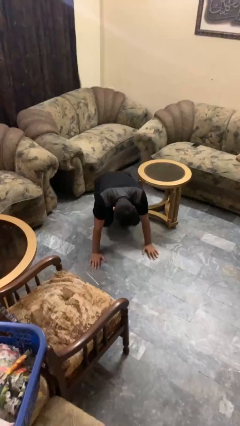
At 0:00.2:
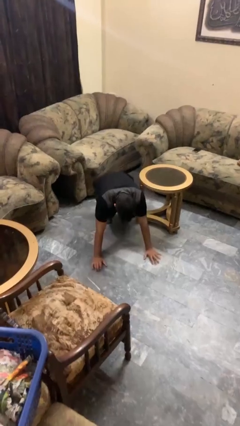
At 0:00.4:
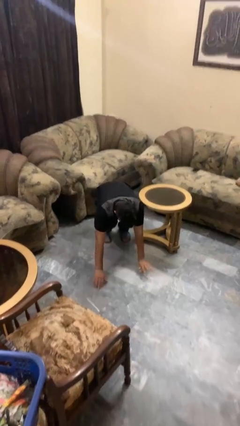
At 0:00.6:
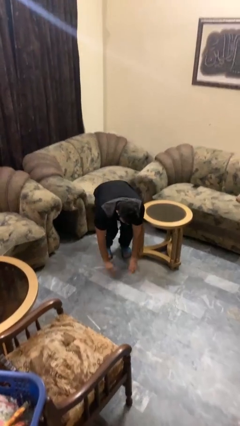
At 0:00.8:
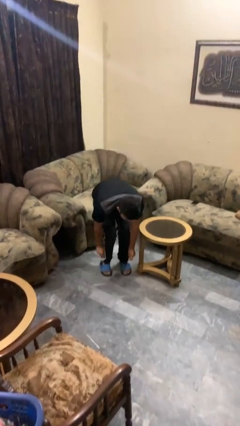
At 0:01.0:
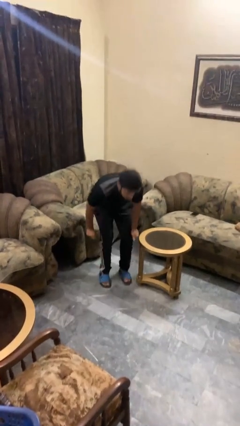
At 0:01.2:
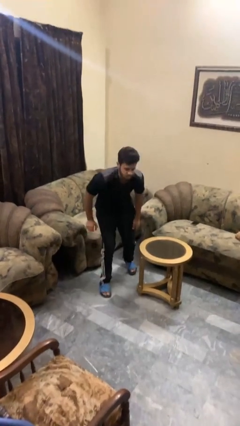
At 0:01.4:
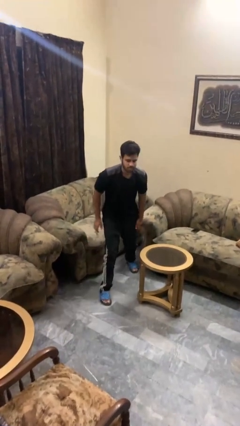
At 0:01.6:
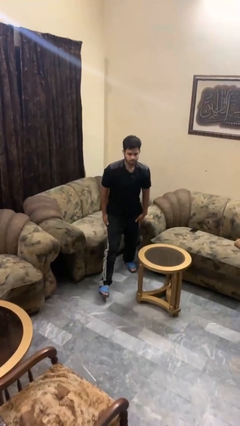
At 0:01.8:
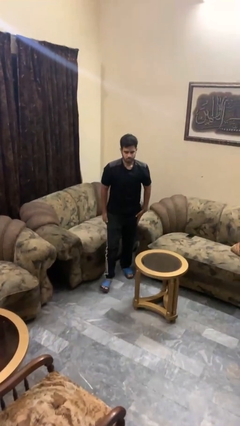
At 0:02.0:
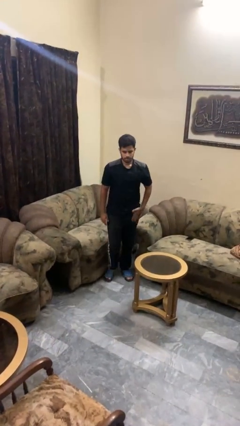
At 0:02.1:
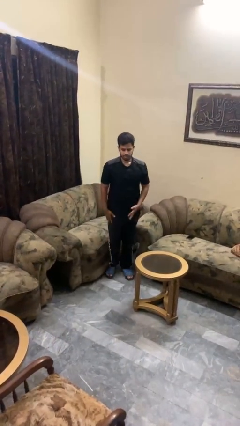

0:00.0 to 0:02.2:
person stands up from floor

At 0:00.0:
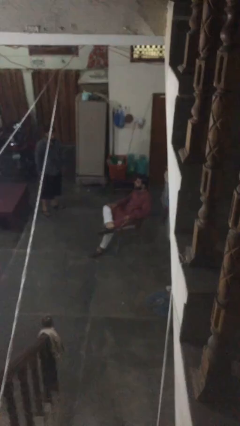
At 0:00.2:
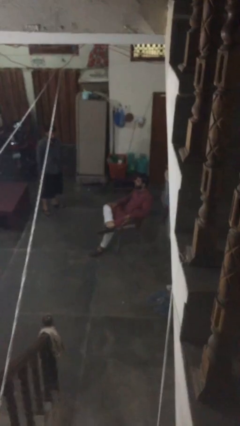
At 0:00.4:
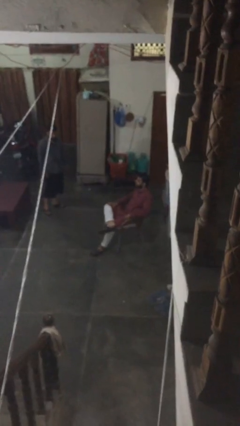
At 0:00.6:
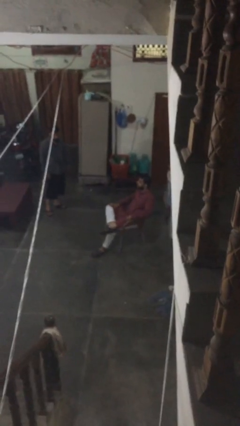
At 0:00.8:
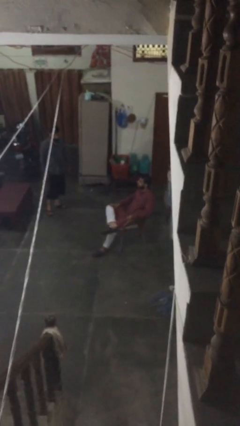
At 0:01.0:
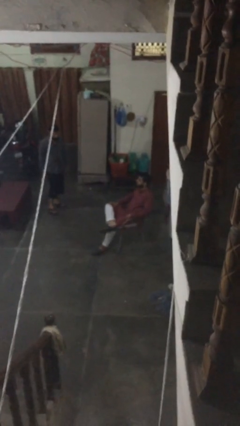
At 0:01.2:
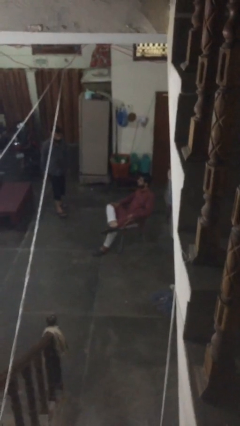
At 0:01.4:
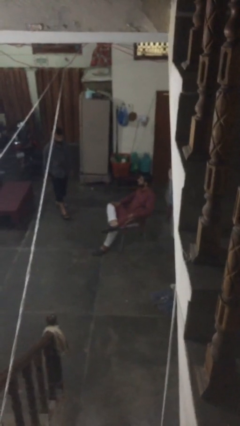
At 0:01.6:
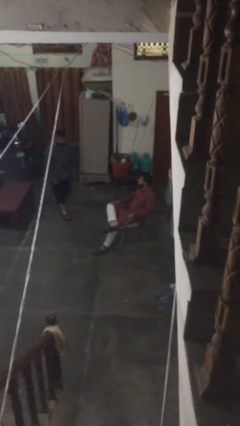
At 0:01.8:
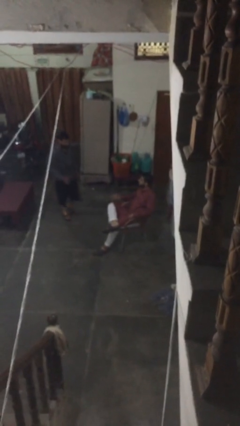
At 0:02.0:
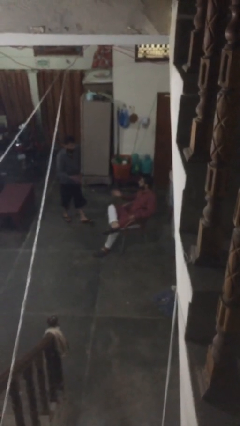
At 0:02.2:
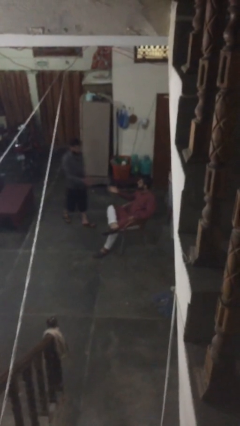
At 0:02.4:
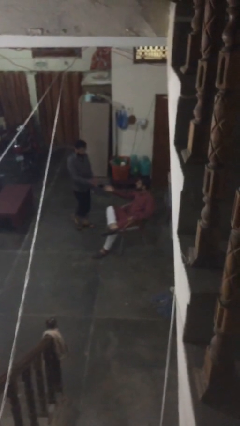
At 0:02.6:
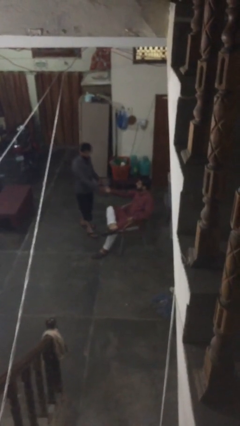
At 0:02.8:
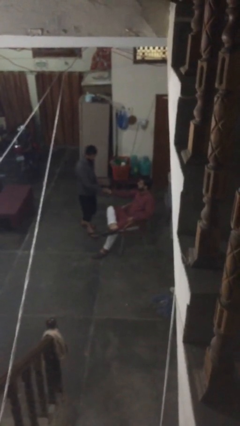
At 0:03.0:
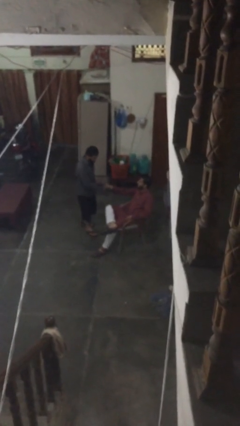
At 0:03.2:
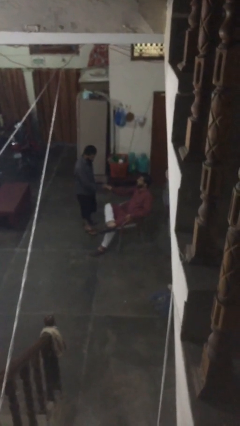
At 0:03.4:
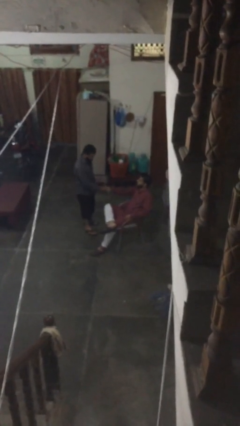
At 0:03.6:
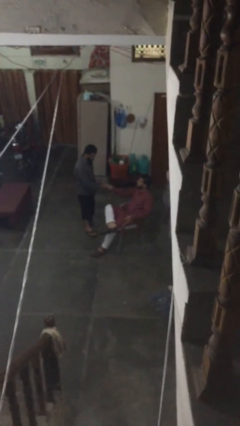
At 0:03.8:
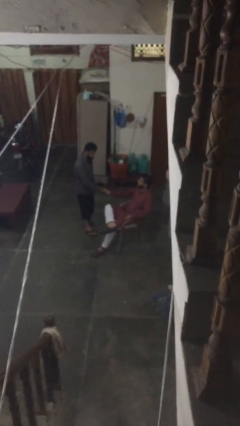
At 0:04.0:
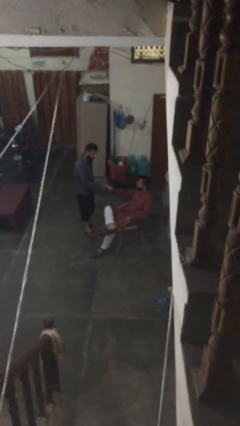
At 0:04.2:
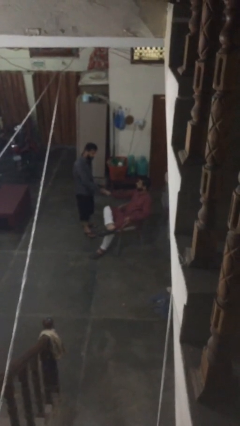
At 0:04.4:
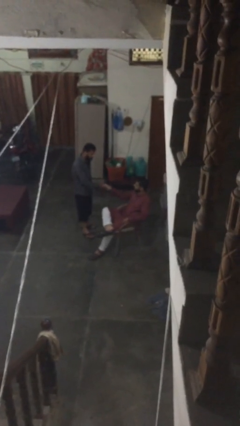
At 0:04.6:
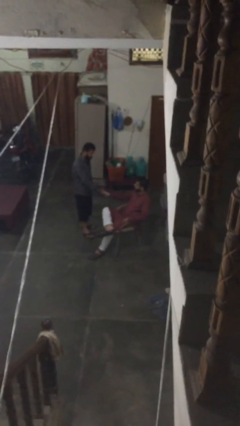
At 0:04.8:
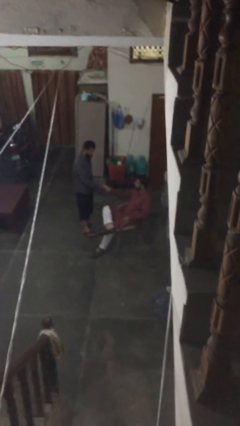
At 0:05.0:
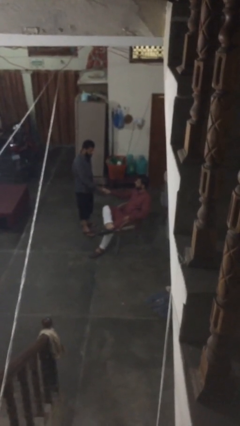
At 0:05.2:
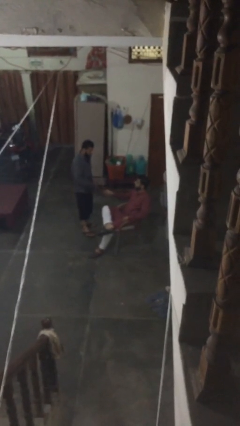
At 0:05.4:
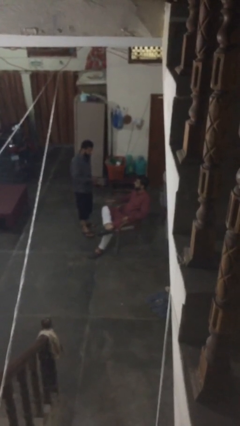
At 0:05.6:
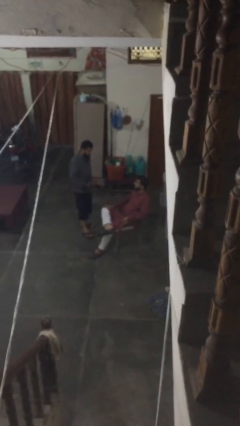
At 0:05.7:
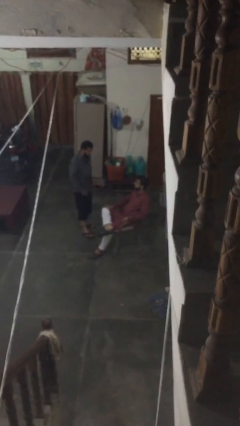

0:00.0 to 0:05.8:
person shakes hand

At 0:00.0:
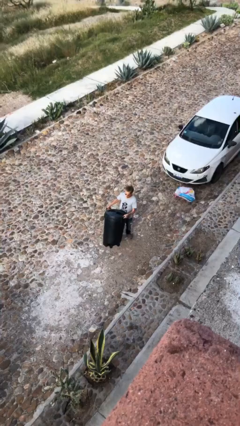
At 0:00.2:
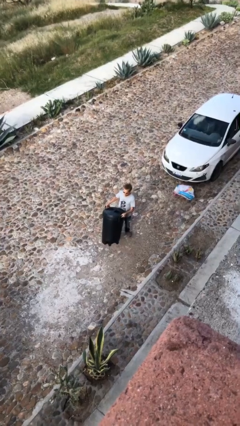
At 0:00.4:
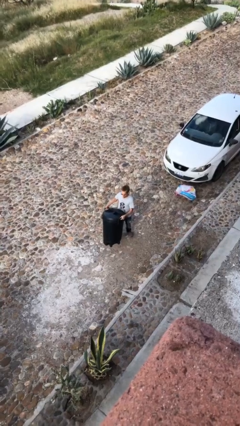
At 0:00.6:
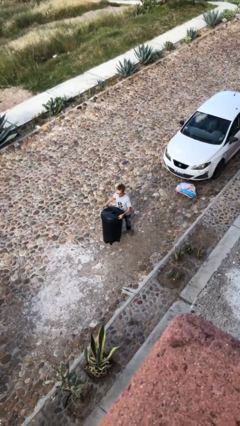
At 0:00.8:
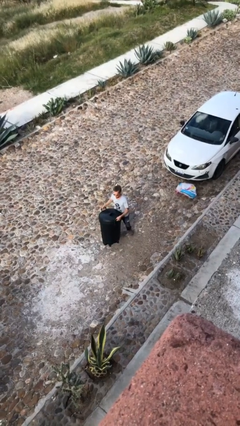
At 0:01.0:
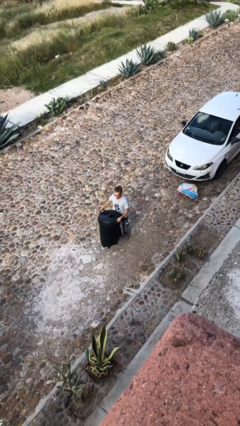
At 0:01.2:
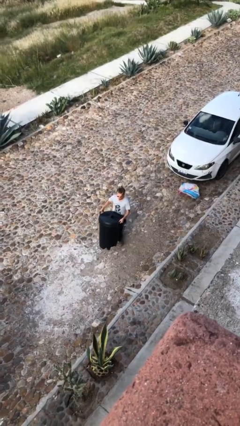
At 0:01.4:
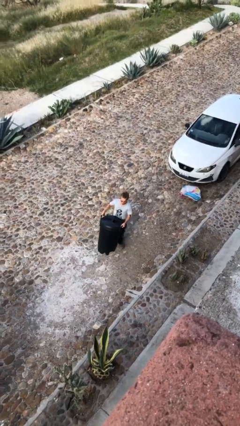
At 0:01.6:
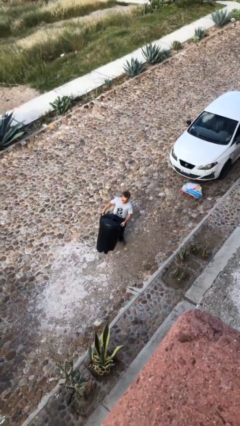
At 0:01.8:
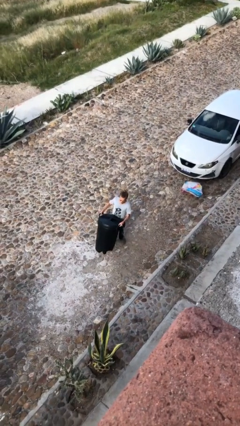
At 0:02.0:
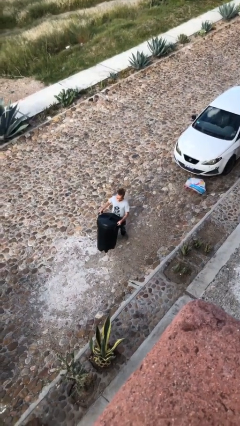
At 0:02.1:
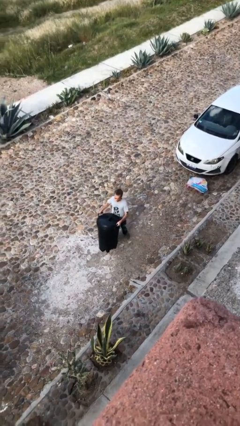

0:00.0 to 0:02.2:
person carries heavy object

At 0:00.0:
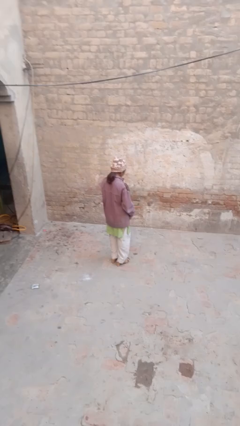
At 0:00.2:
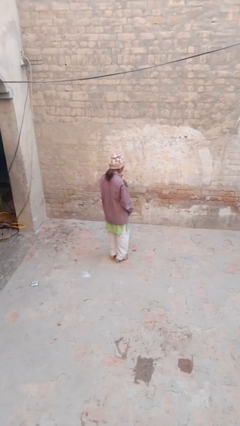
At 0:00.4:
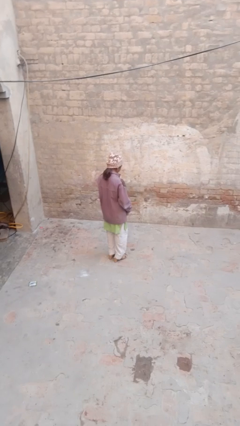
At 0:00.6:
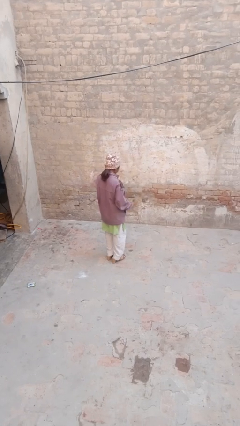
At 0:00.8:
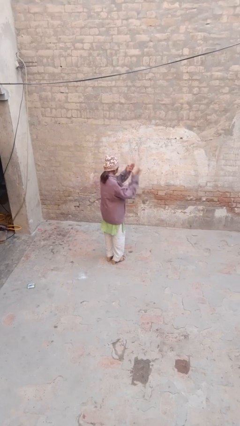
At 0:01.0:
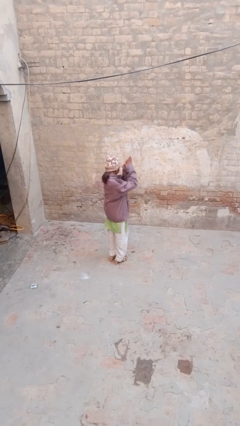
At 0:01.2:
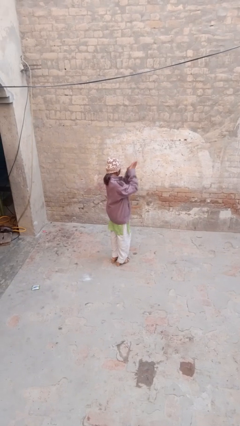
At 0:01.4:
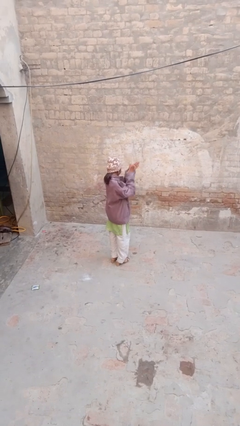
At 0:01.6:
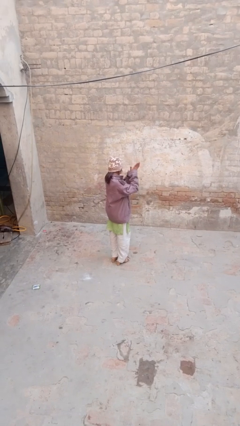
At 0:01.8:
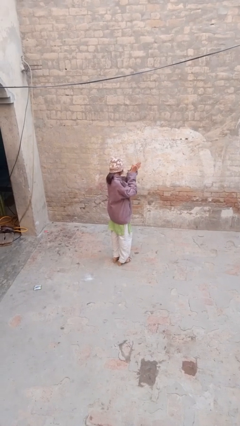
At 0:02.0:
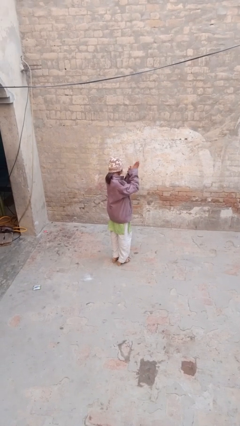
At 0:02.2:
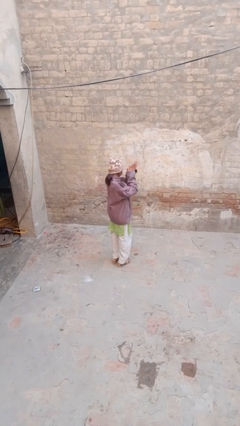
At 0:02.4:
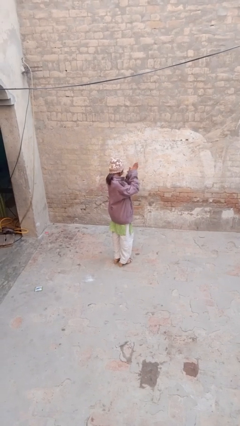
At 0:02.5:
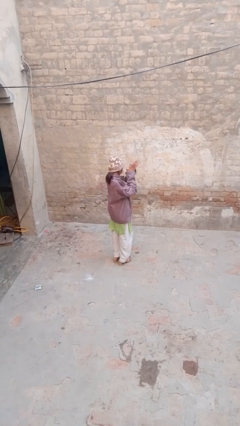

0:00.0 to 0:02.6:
person blows into hands

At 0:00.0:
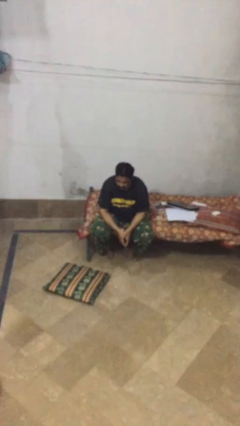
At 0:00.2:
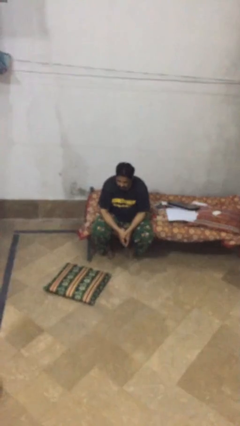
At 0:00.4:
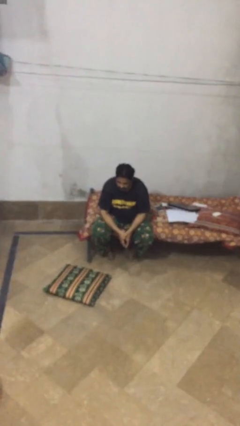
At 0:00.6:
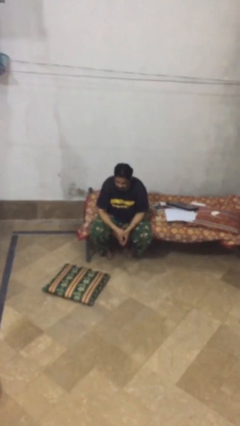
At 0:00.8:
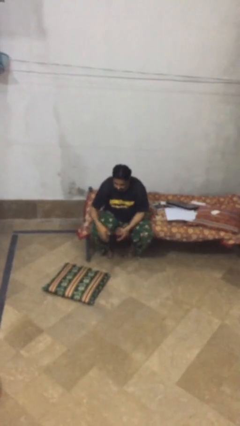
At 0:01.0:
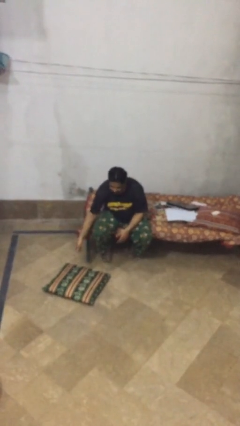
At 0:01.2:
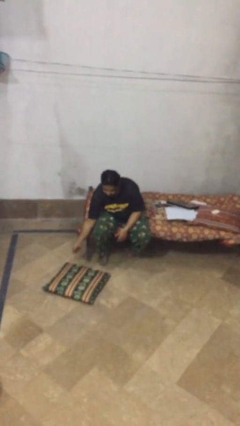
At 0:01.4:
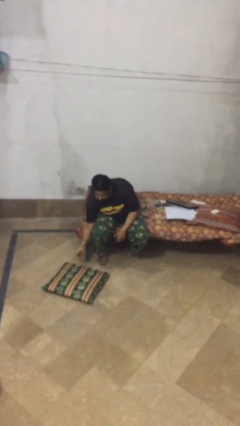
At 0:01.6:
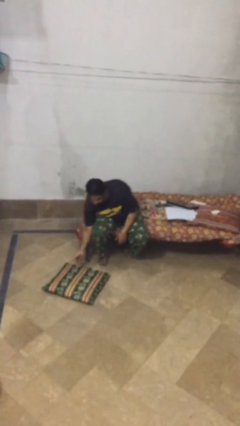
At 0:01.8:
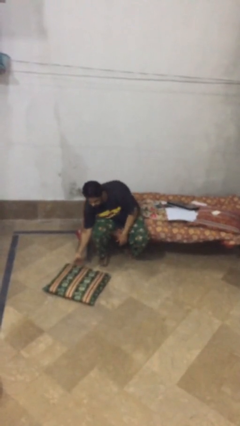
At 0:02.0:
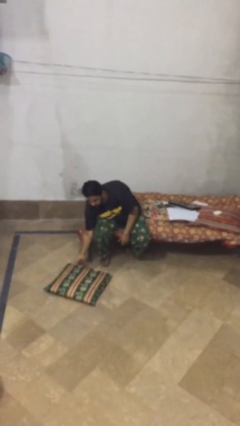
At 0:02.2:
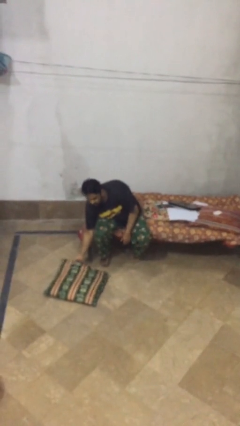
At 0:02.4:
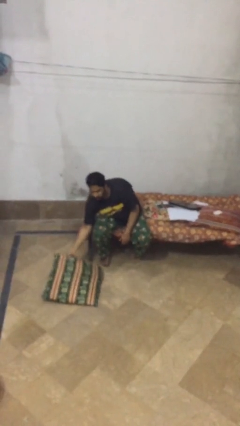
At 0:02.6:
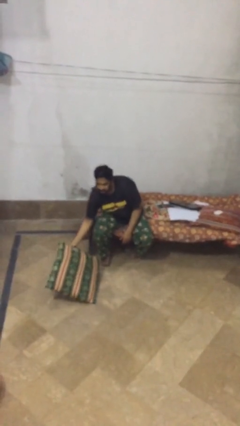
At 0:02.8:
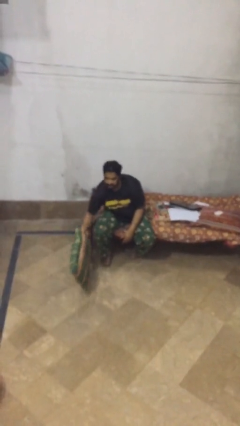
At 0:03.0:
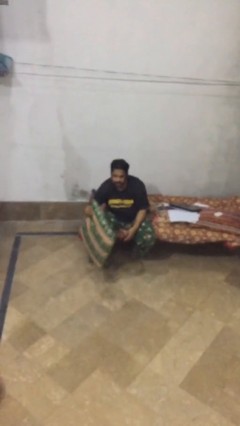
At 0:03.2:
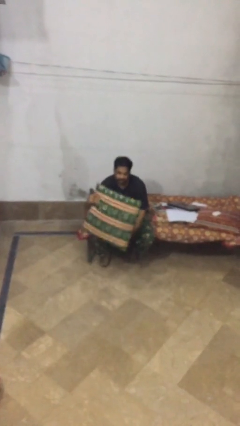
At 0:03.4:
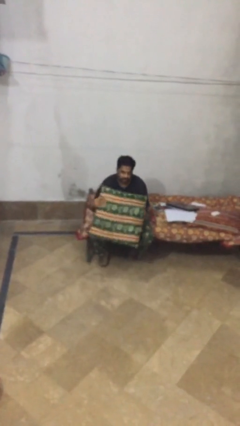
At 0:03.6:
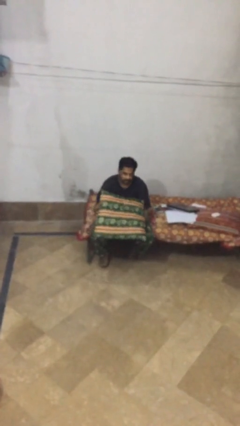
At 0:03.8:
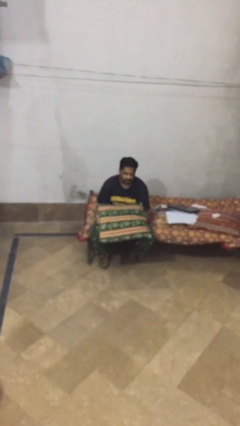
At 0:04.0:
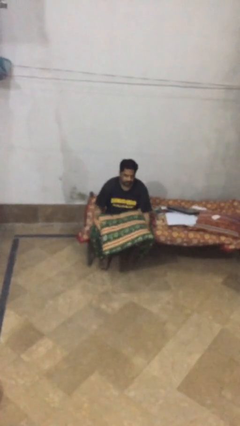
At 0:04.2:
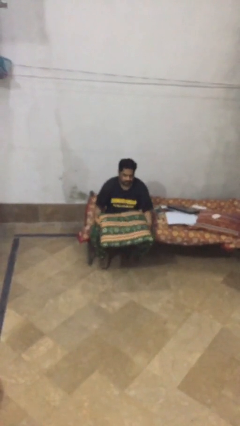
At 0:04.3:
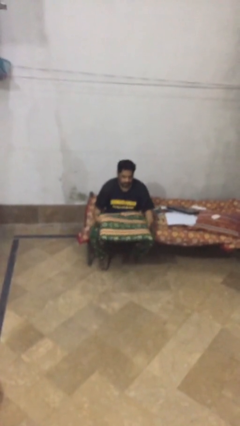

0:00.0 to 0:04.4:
person picks up object from floor

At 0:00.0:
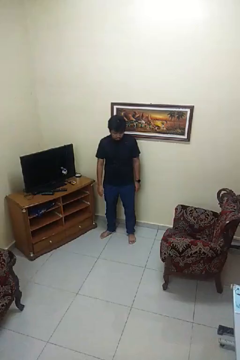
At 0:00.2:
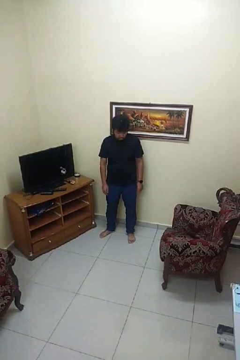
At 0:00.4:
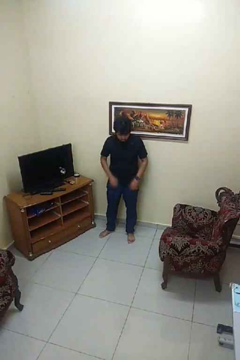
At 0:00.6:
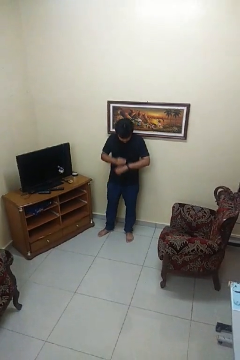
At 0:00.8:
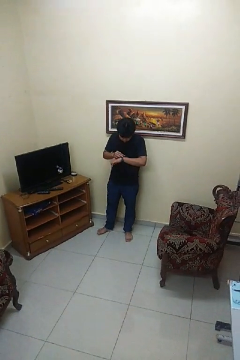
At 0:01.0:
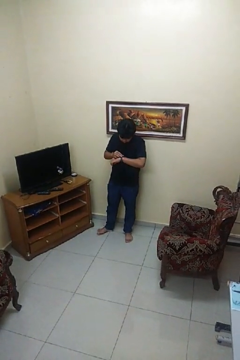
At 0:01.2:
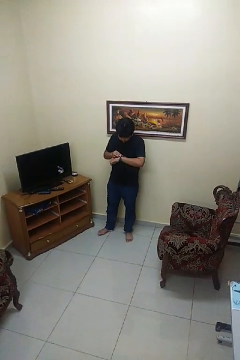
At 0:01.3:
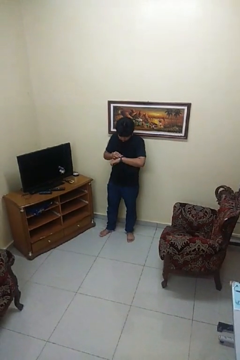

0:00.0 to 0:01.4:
person looks at wristwatch
